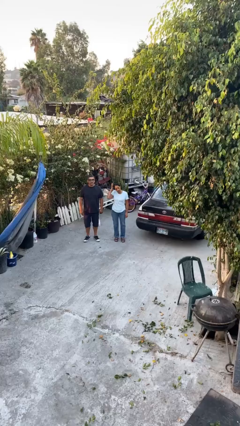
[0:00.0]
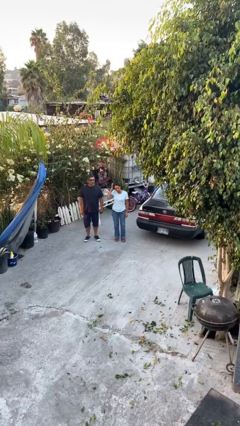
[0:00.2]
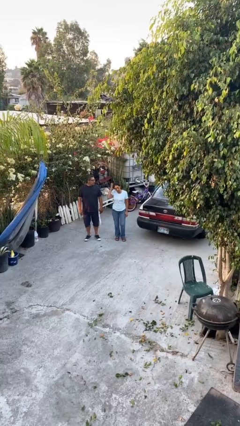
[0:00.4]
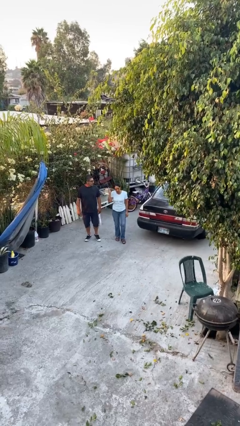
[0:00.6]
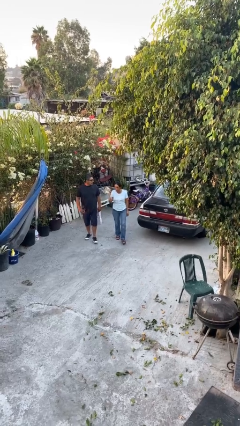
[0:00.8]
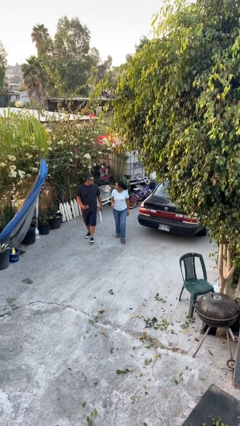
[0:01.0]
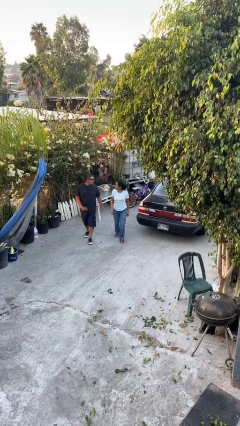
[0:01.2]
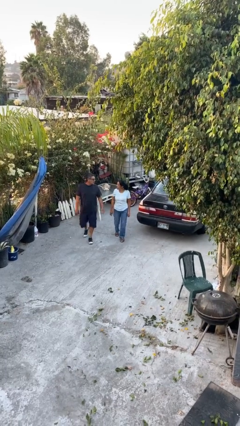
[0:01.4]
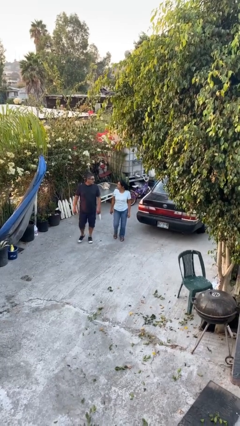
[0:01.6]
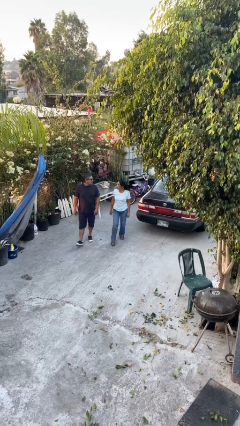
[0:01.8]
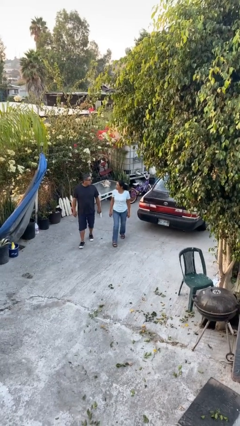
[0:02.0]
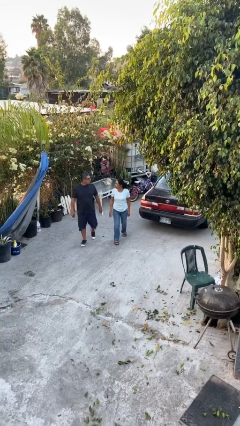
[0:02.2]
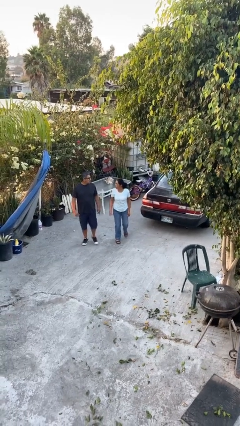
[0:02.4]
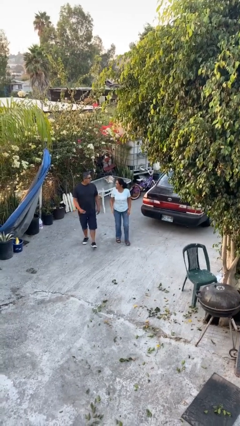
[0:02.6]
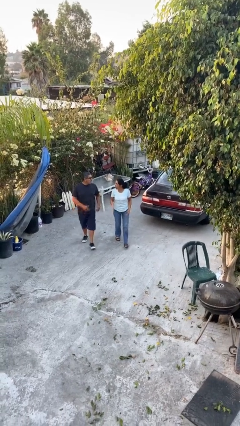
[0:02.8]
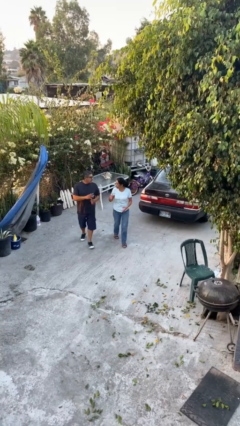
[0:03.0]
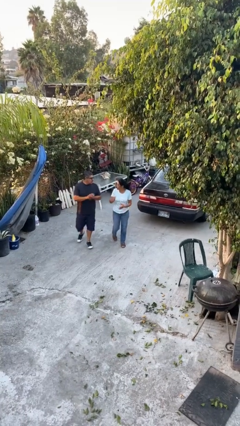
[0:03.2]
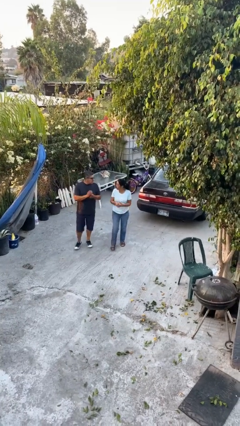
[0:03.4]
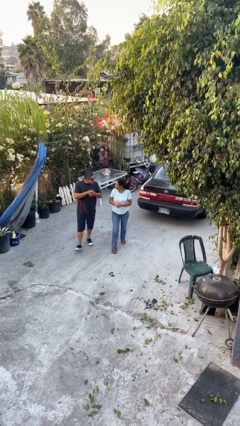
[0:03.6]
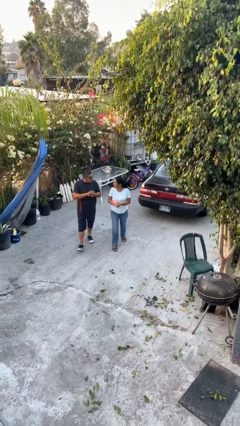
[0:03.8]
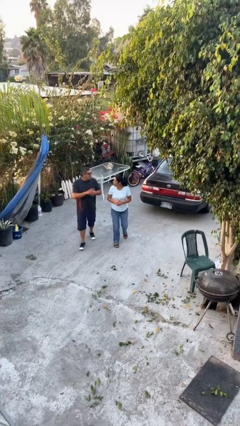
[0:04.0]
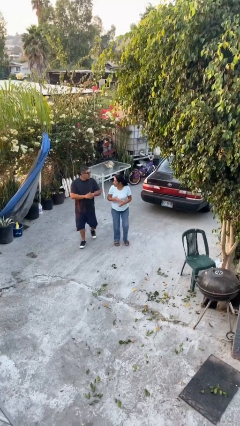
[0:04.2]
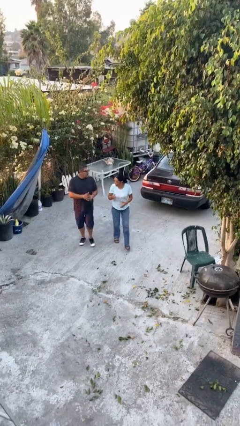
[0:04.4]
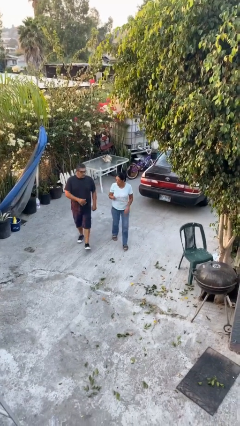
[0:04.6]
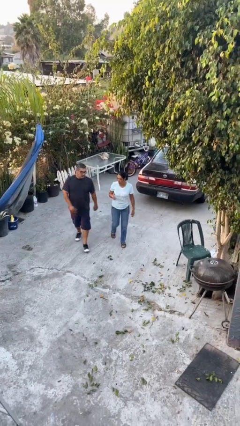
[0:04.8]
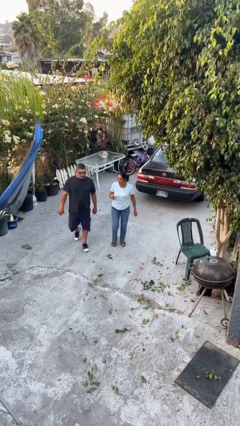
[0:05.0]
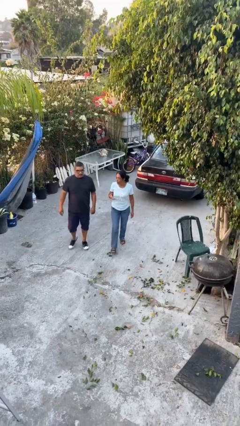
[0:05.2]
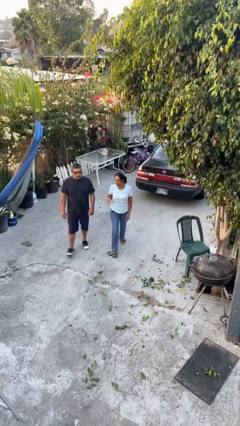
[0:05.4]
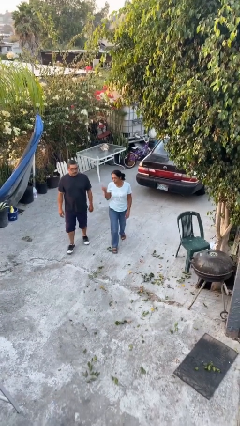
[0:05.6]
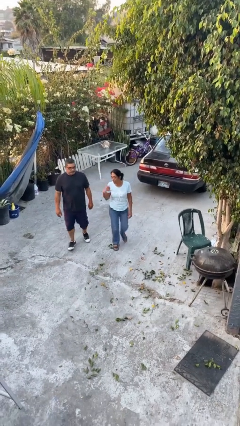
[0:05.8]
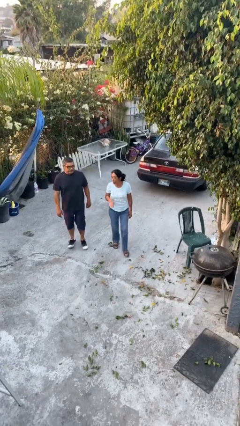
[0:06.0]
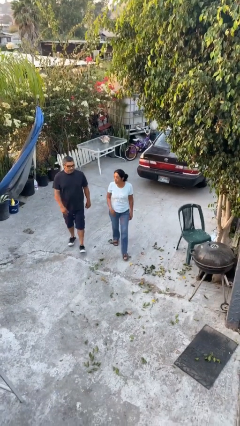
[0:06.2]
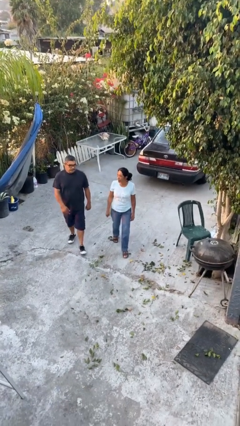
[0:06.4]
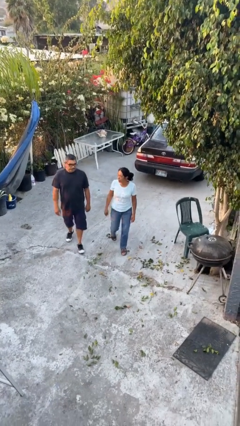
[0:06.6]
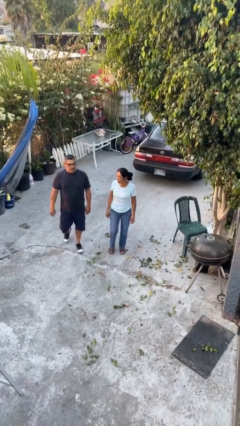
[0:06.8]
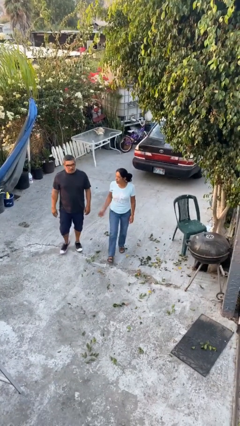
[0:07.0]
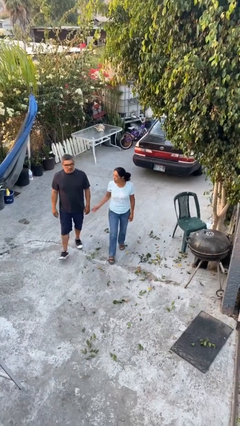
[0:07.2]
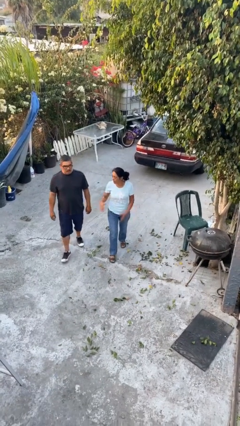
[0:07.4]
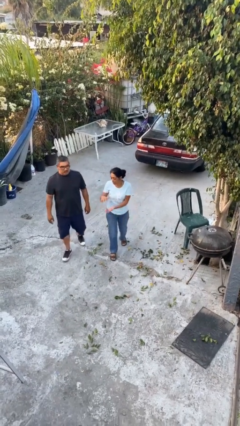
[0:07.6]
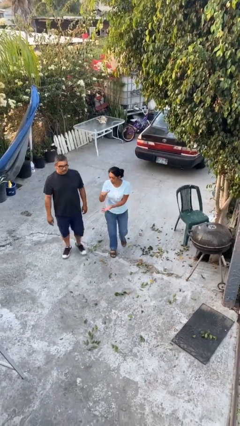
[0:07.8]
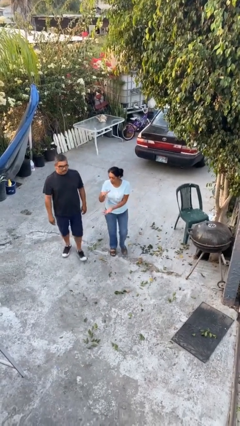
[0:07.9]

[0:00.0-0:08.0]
person talks to person

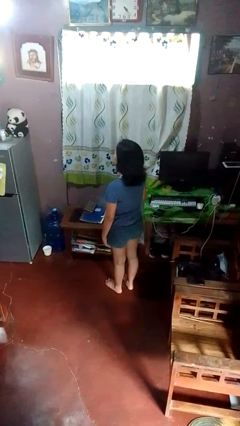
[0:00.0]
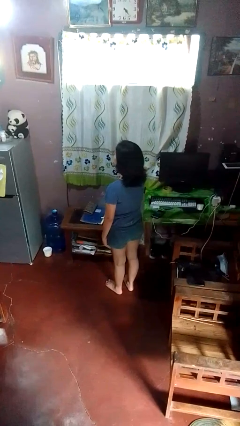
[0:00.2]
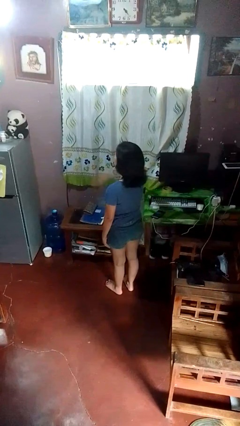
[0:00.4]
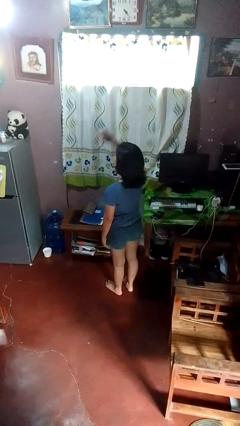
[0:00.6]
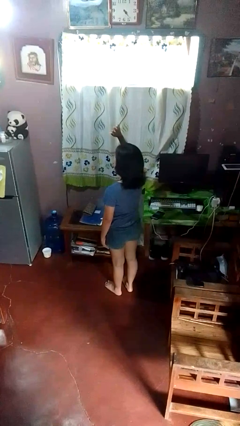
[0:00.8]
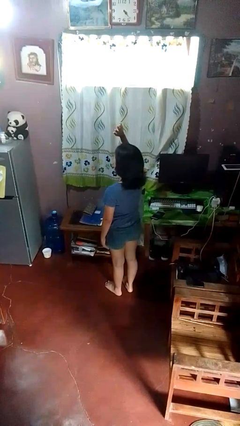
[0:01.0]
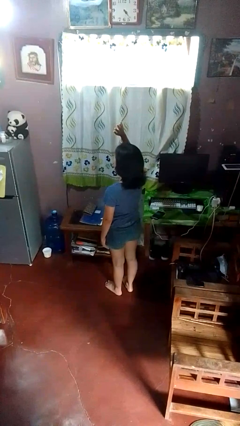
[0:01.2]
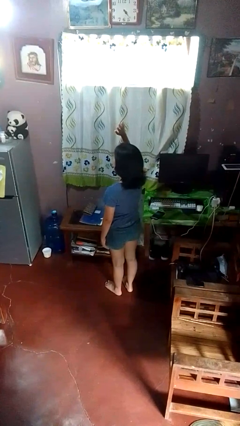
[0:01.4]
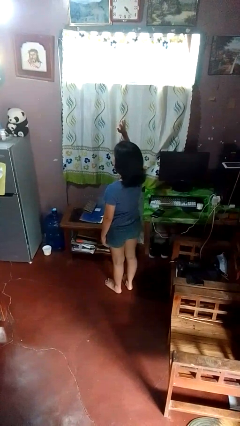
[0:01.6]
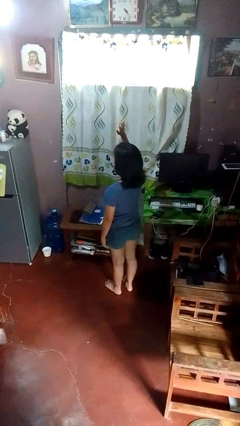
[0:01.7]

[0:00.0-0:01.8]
person gestures swipe up

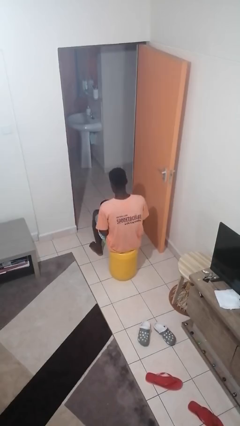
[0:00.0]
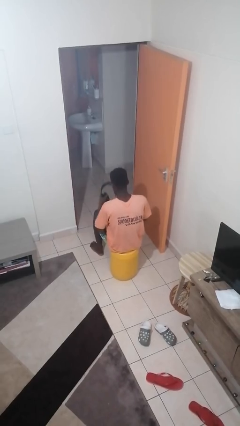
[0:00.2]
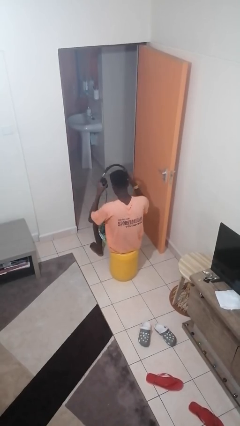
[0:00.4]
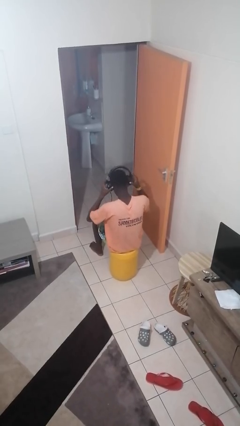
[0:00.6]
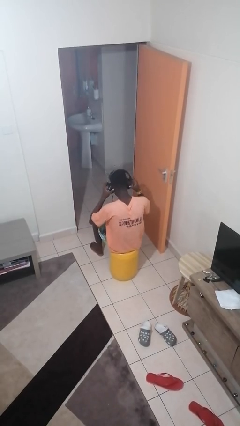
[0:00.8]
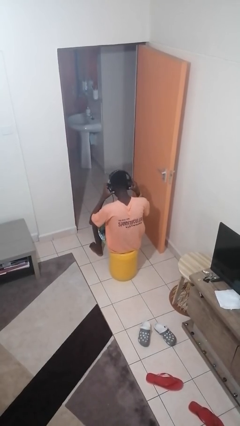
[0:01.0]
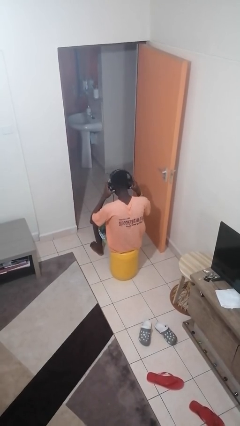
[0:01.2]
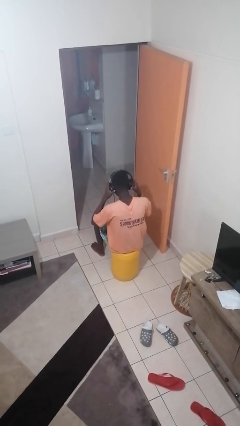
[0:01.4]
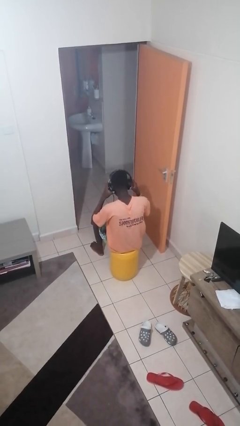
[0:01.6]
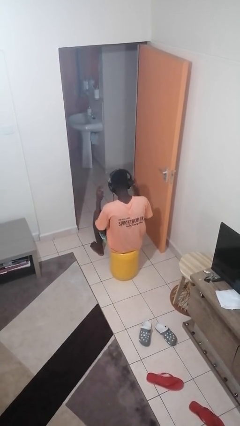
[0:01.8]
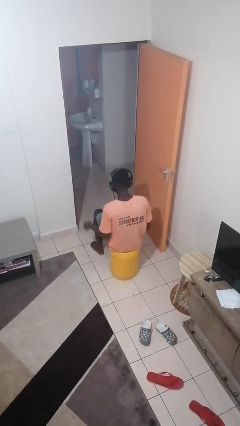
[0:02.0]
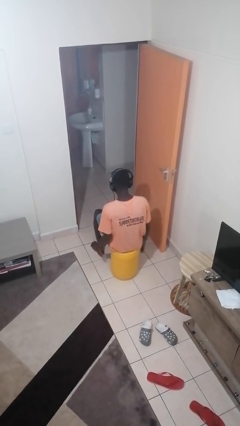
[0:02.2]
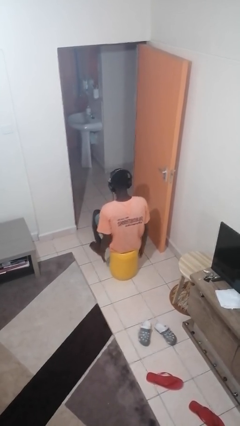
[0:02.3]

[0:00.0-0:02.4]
person puts on headphones

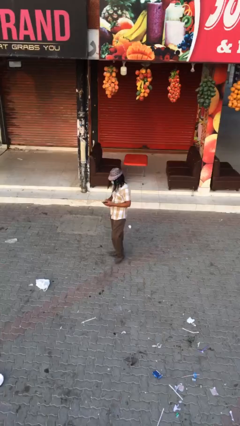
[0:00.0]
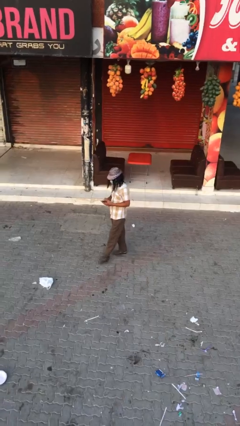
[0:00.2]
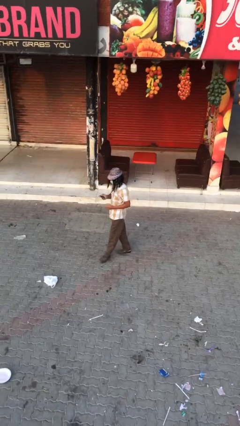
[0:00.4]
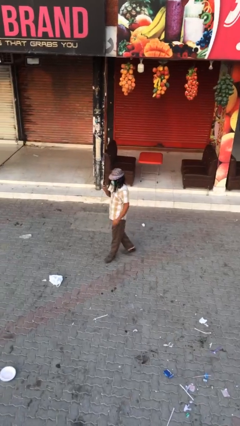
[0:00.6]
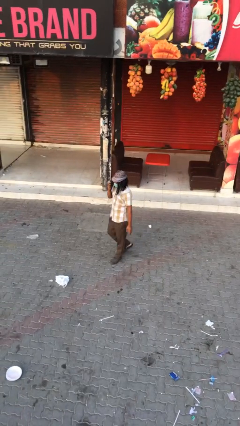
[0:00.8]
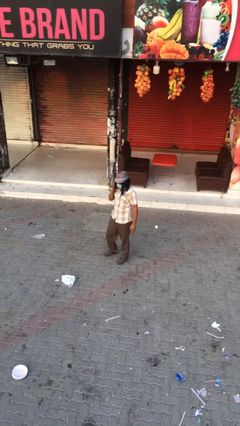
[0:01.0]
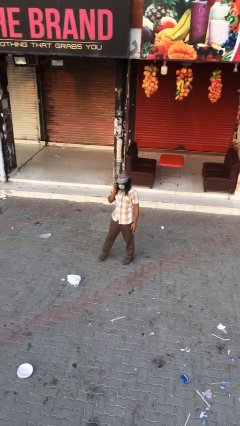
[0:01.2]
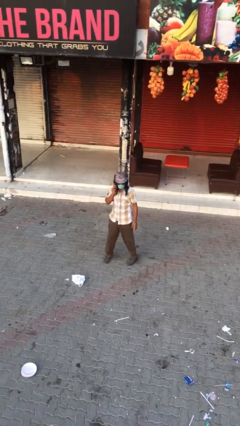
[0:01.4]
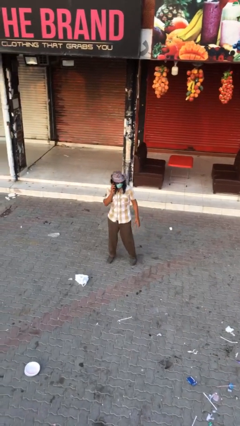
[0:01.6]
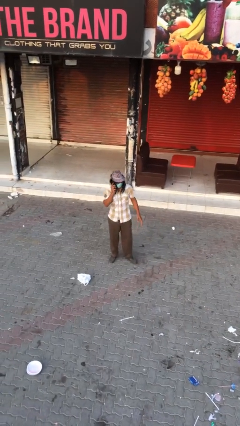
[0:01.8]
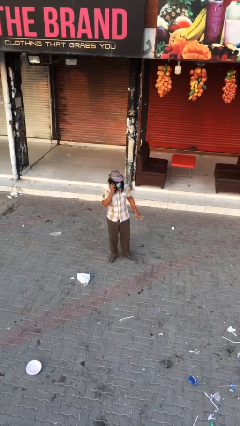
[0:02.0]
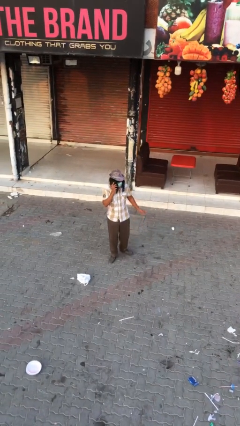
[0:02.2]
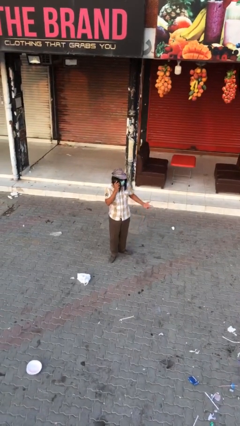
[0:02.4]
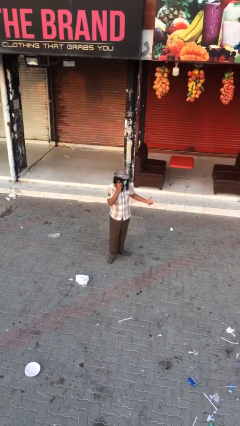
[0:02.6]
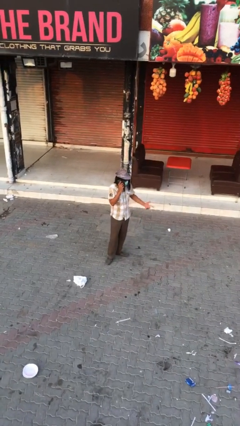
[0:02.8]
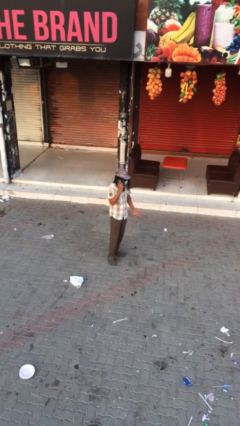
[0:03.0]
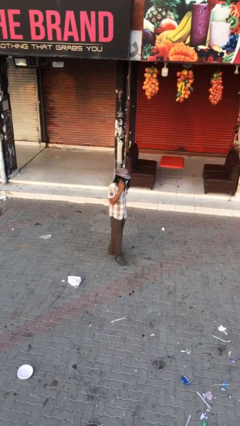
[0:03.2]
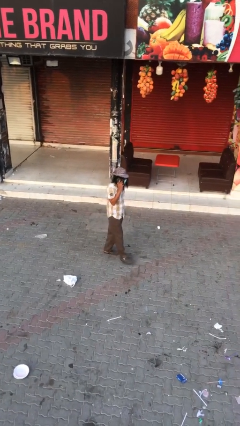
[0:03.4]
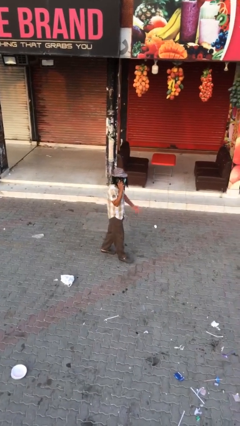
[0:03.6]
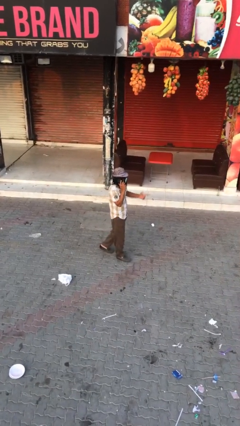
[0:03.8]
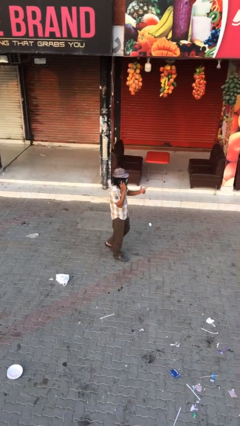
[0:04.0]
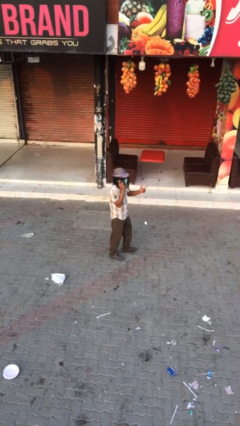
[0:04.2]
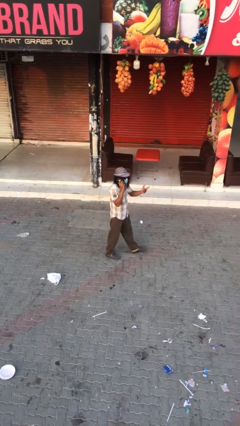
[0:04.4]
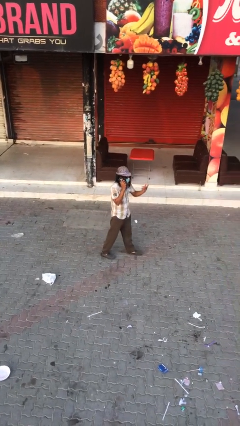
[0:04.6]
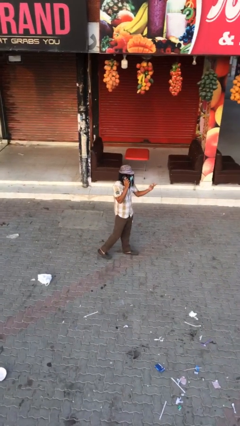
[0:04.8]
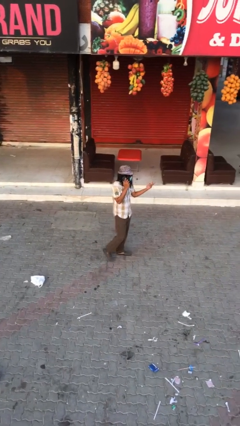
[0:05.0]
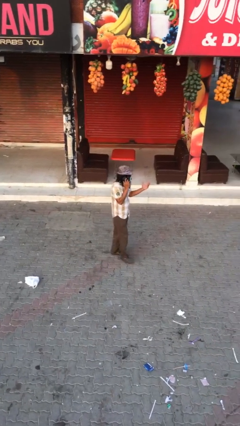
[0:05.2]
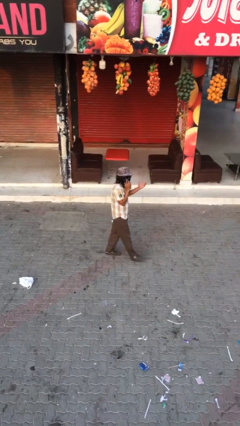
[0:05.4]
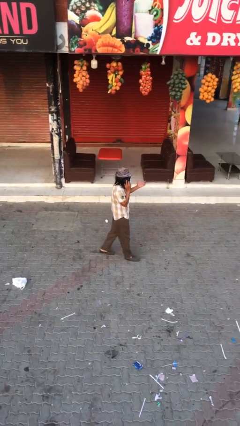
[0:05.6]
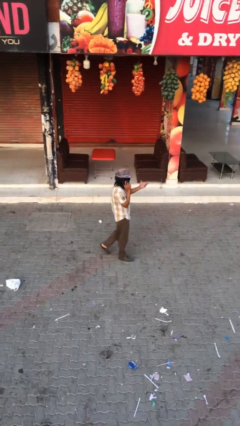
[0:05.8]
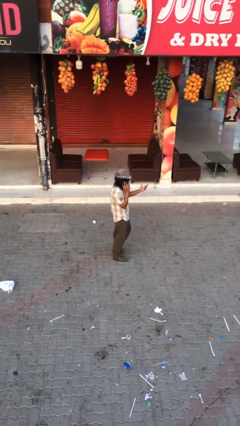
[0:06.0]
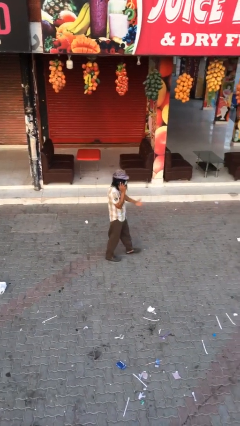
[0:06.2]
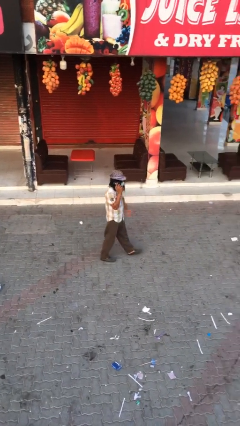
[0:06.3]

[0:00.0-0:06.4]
person talks on phone
